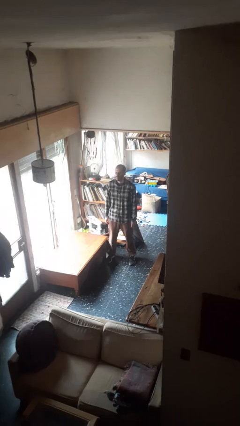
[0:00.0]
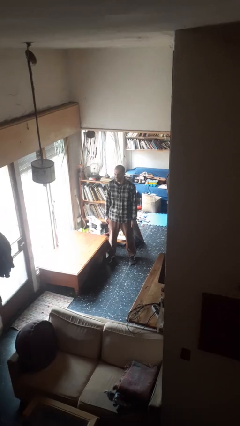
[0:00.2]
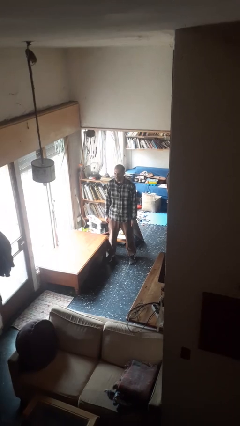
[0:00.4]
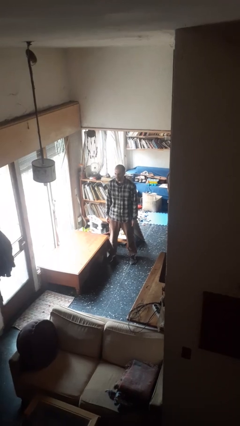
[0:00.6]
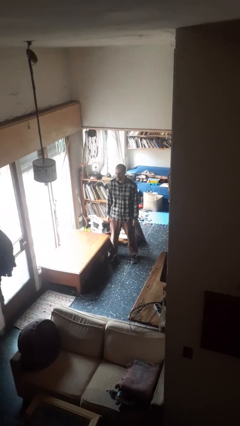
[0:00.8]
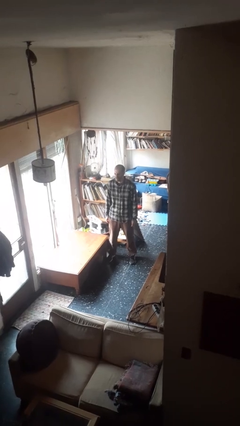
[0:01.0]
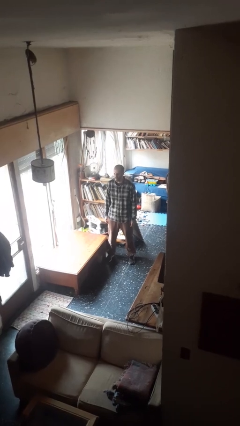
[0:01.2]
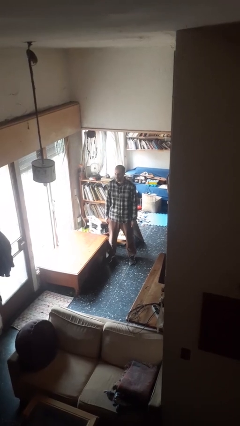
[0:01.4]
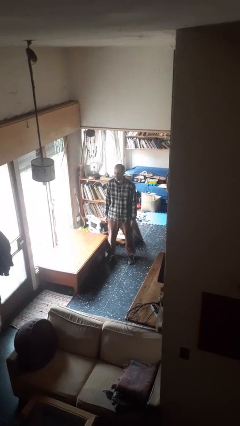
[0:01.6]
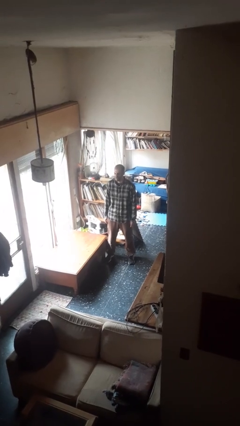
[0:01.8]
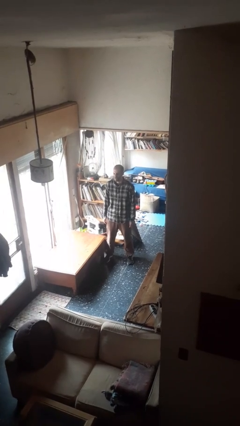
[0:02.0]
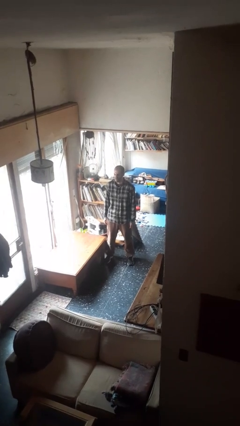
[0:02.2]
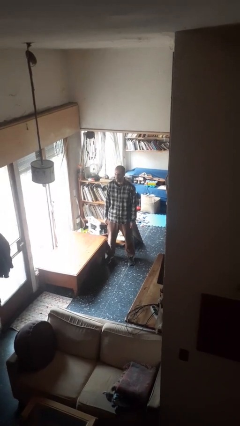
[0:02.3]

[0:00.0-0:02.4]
person sticks out tongue

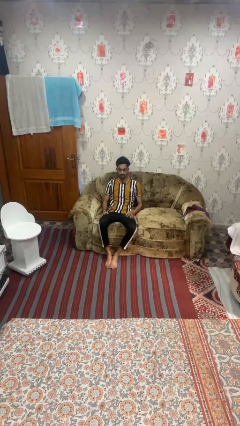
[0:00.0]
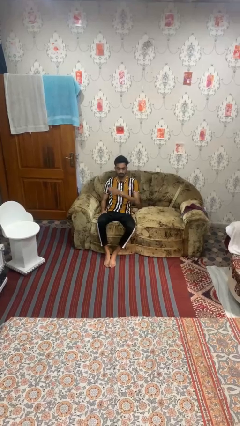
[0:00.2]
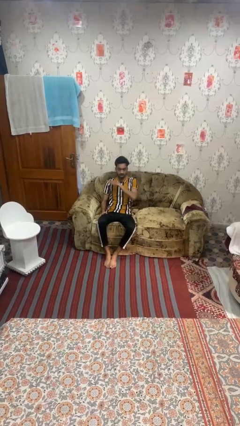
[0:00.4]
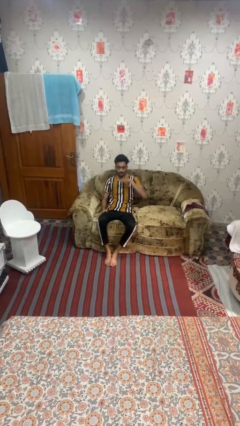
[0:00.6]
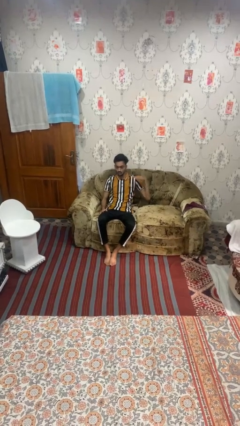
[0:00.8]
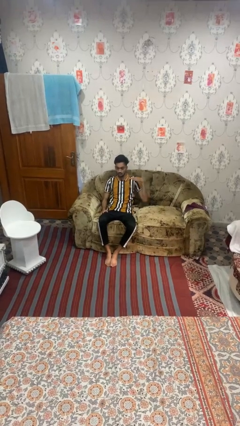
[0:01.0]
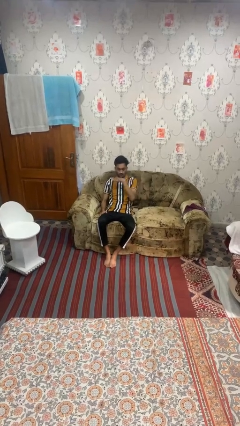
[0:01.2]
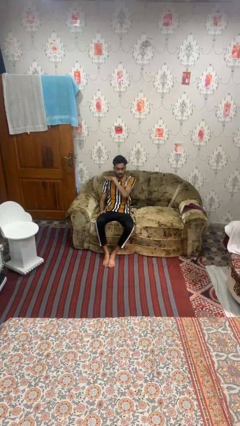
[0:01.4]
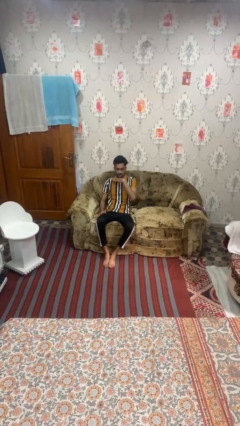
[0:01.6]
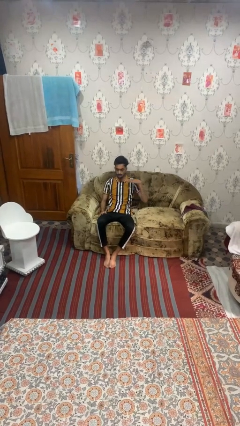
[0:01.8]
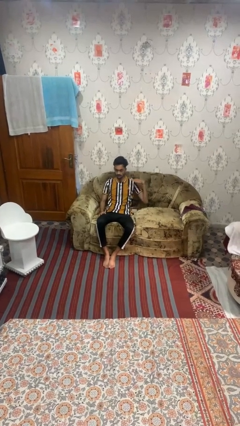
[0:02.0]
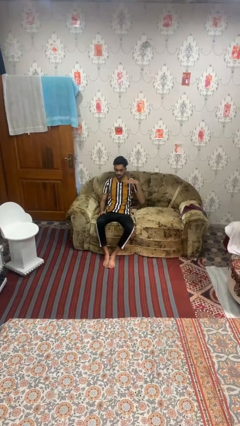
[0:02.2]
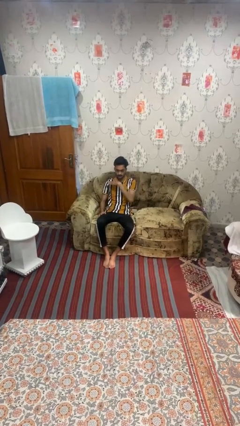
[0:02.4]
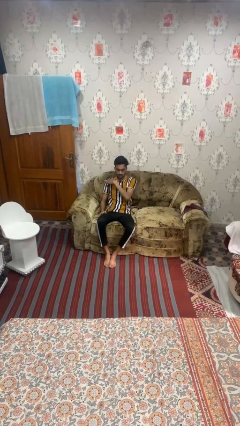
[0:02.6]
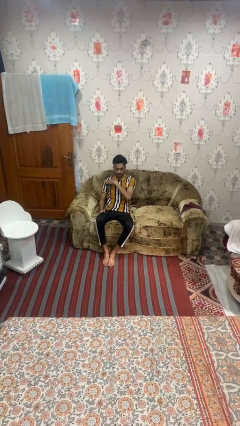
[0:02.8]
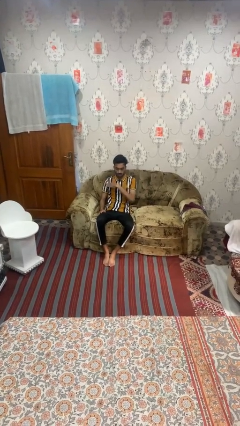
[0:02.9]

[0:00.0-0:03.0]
person gestures cut

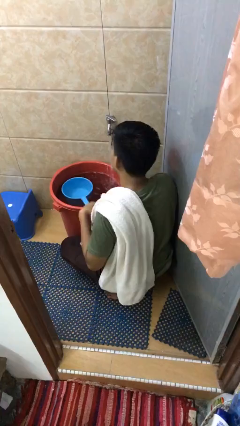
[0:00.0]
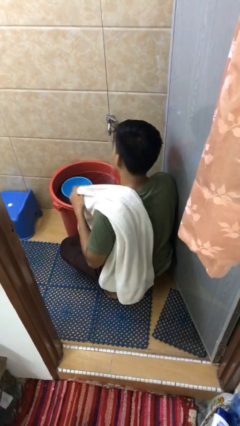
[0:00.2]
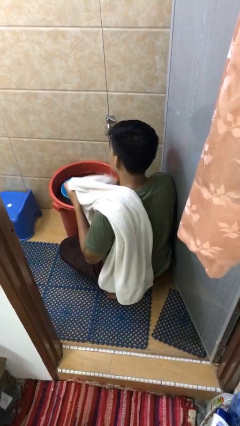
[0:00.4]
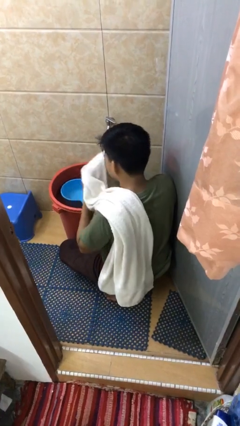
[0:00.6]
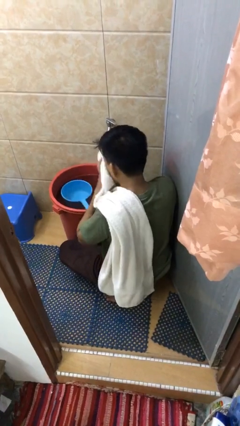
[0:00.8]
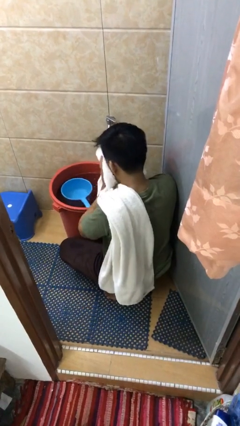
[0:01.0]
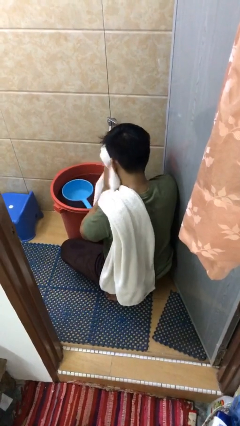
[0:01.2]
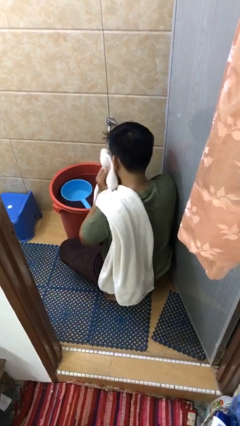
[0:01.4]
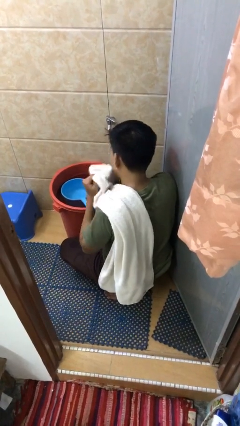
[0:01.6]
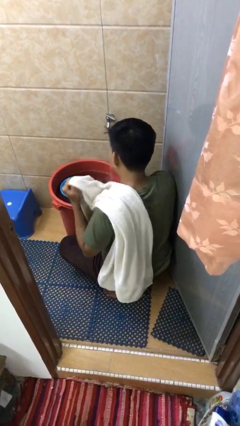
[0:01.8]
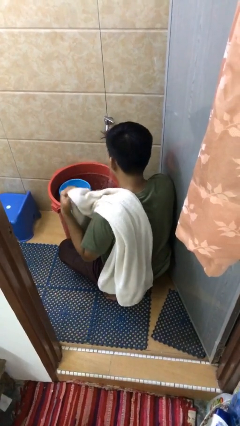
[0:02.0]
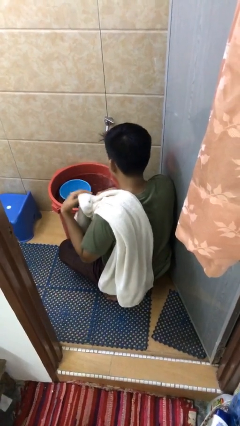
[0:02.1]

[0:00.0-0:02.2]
person dries face with towel

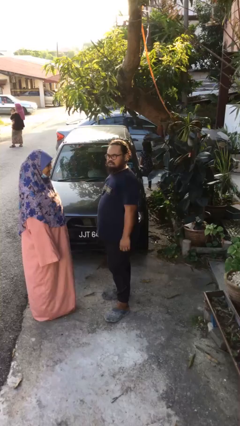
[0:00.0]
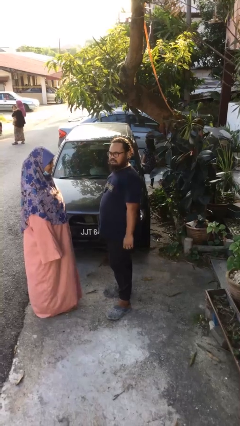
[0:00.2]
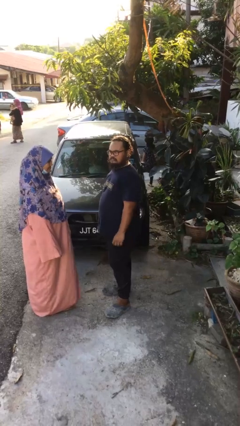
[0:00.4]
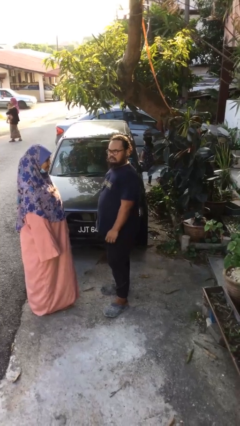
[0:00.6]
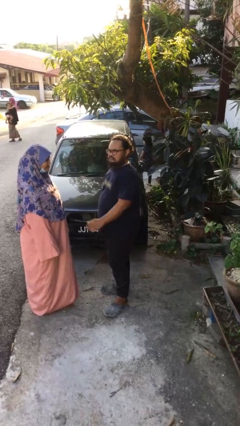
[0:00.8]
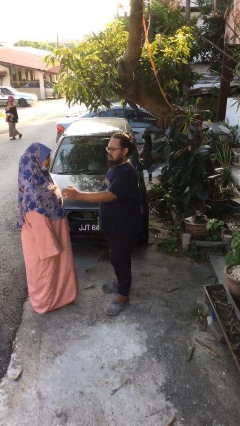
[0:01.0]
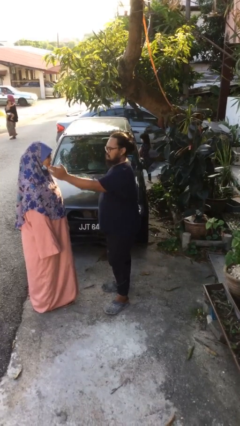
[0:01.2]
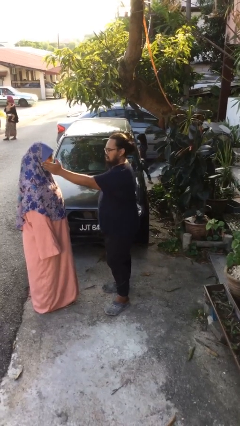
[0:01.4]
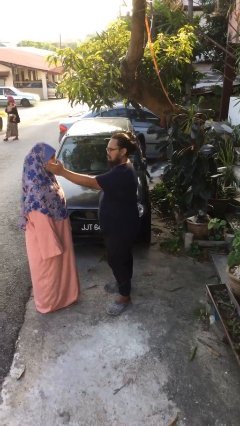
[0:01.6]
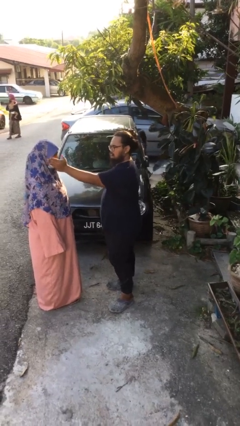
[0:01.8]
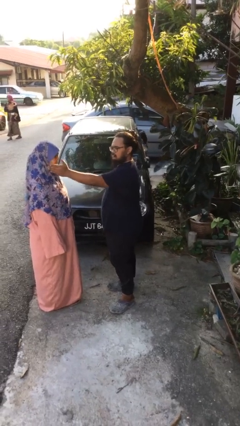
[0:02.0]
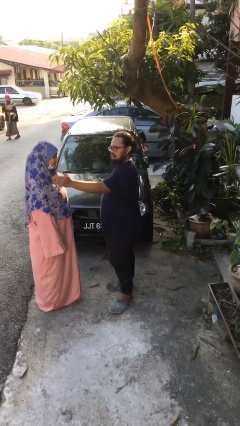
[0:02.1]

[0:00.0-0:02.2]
person touches face of person

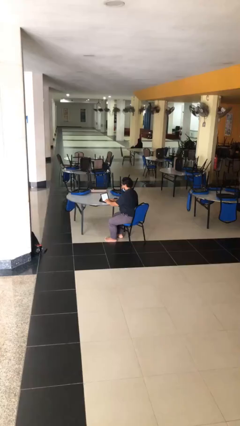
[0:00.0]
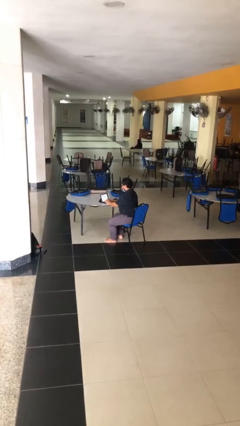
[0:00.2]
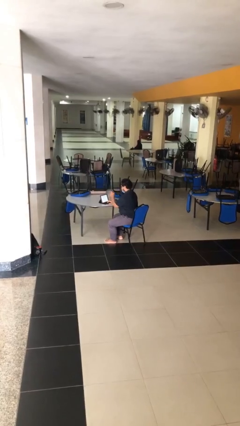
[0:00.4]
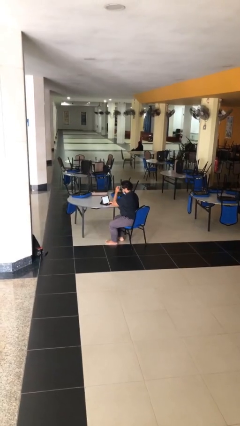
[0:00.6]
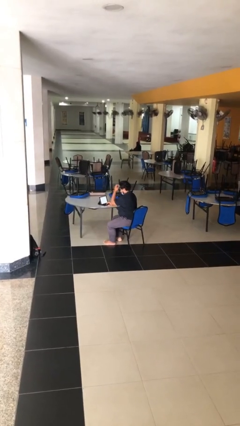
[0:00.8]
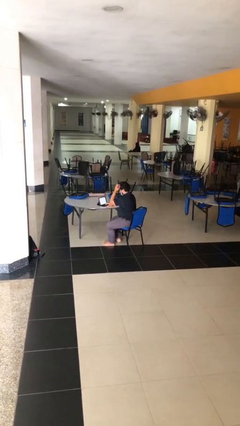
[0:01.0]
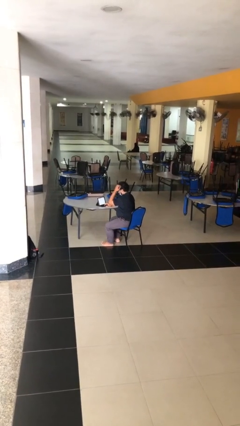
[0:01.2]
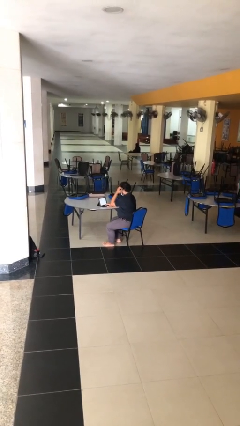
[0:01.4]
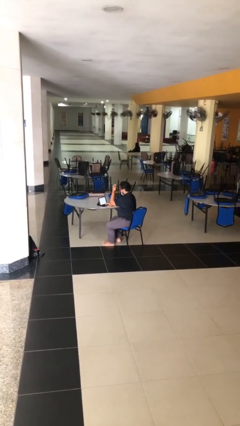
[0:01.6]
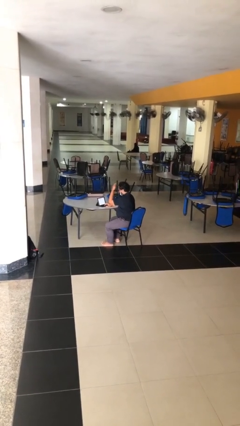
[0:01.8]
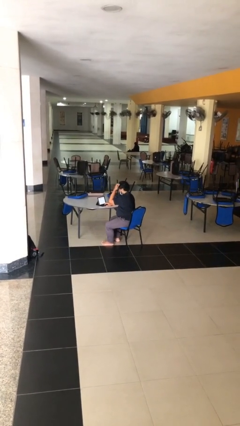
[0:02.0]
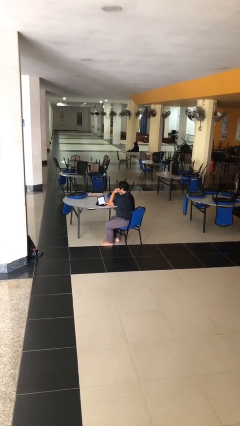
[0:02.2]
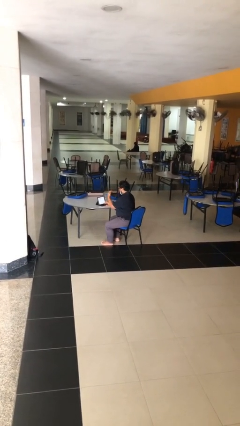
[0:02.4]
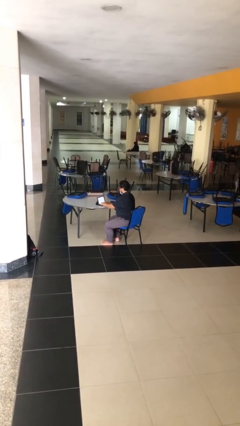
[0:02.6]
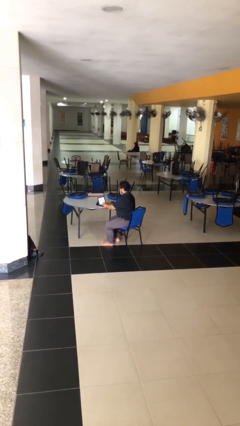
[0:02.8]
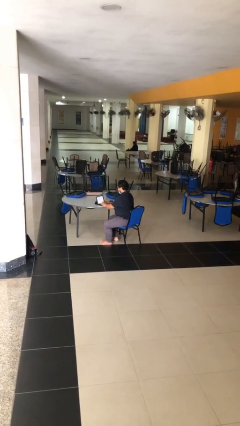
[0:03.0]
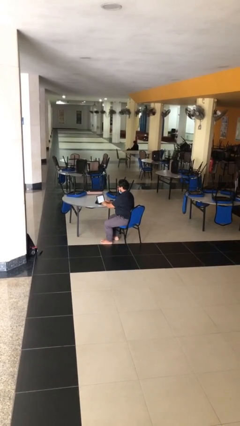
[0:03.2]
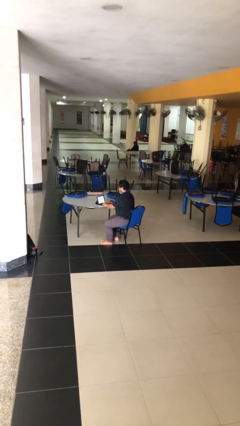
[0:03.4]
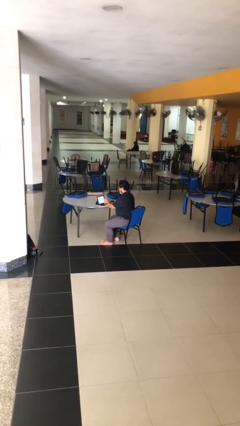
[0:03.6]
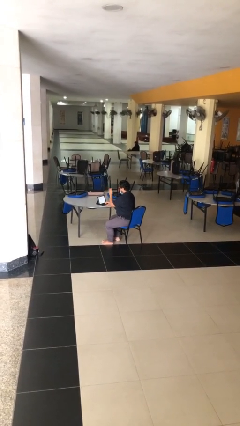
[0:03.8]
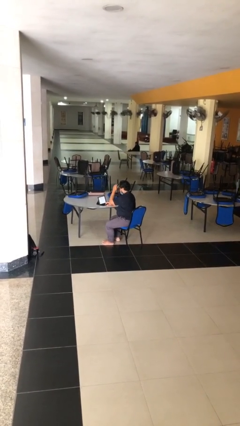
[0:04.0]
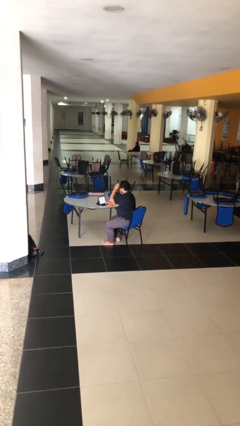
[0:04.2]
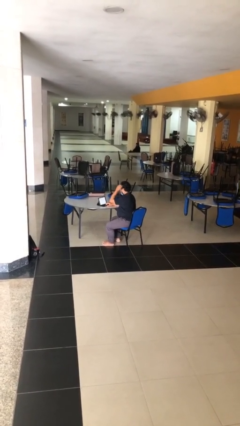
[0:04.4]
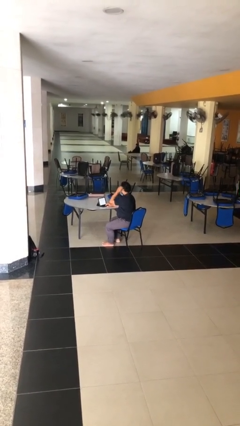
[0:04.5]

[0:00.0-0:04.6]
person interacts with laptop

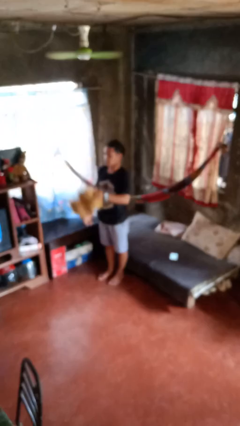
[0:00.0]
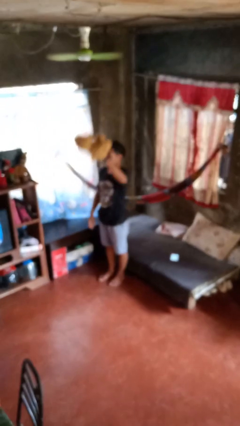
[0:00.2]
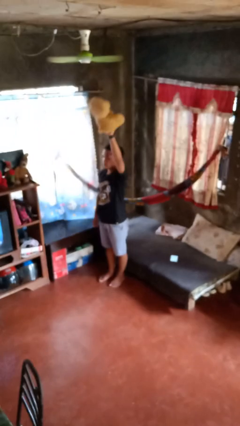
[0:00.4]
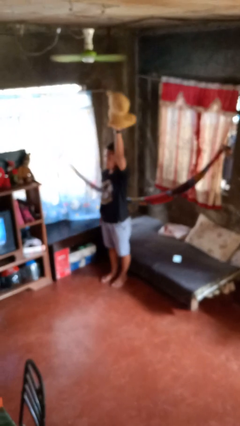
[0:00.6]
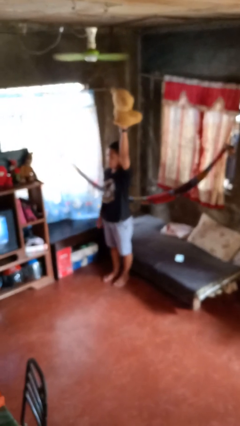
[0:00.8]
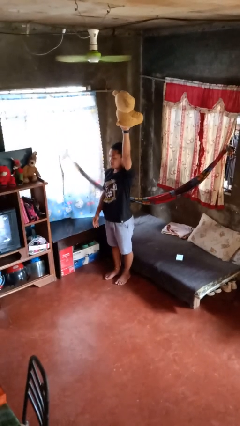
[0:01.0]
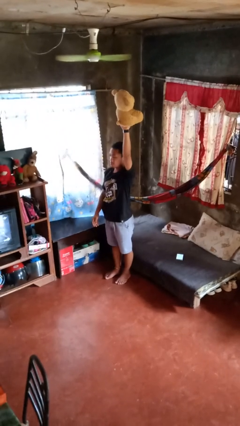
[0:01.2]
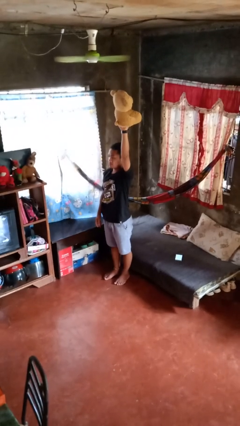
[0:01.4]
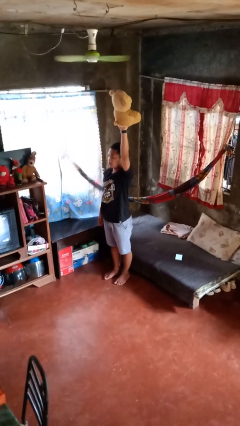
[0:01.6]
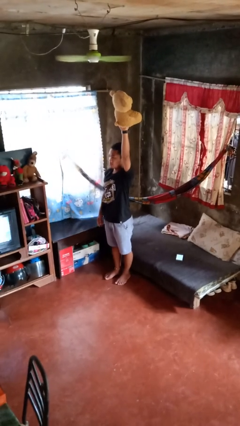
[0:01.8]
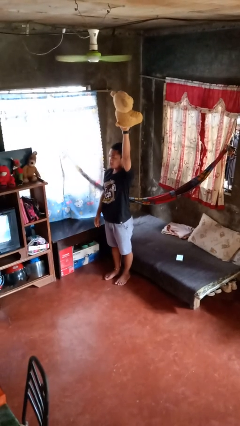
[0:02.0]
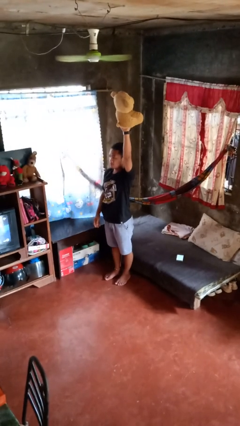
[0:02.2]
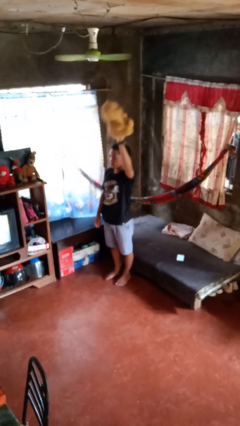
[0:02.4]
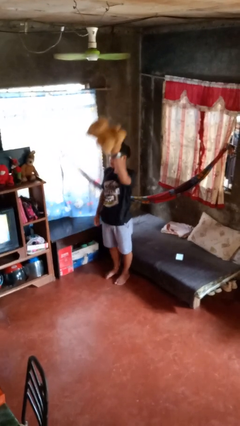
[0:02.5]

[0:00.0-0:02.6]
person holds object above head
